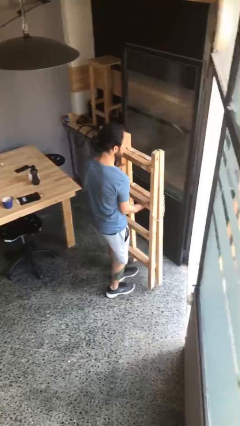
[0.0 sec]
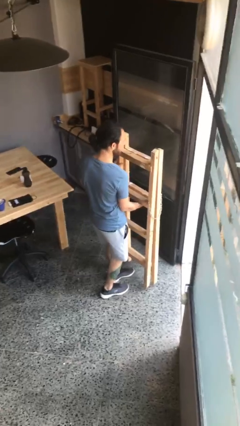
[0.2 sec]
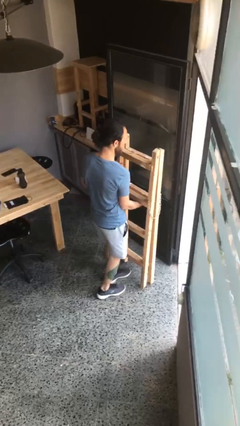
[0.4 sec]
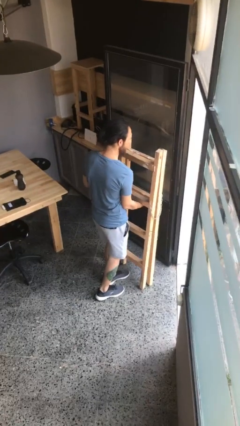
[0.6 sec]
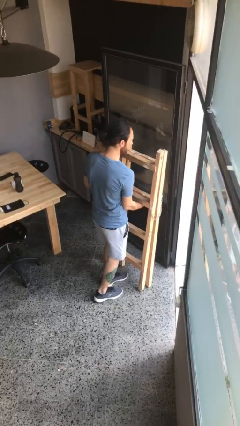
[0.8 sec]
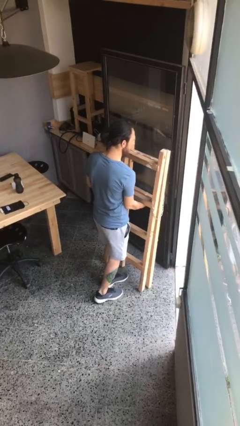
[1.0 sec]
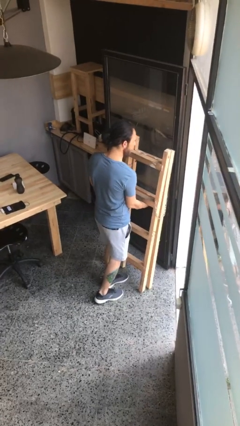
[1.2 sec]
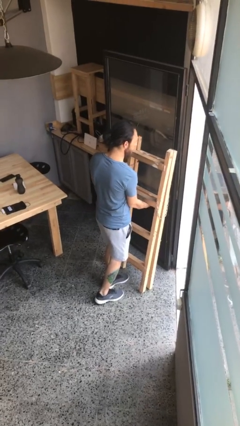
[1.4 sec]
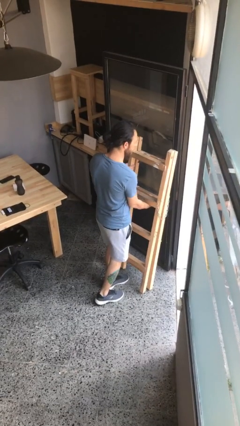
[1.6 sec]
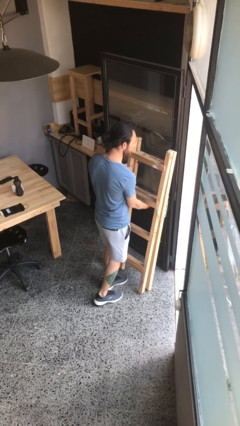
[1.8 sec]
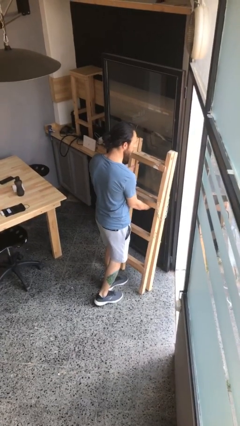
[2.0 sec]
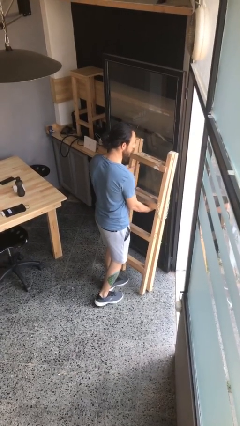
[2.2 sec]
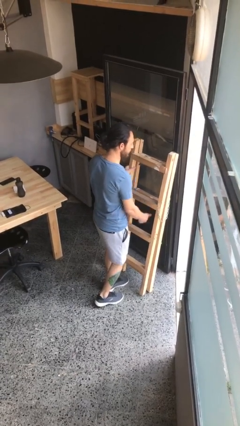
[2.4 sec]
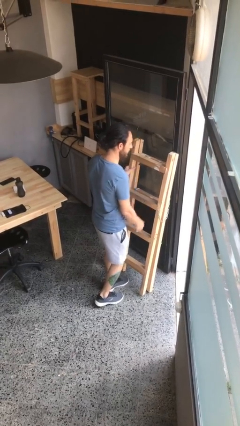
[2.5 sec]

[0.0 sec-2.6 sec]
person puts down object on floor

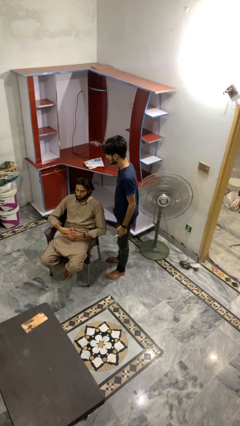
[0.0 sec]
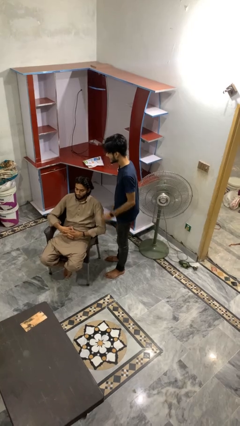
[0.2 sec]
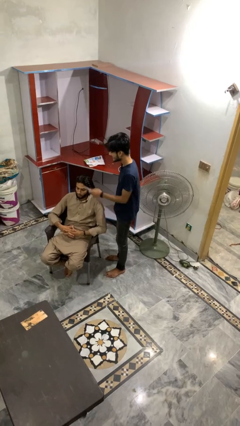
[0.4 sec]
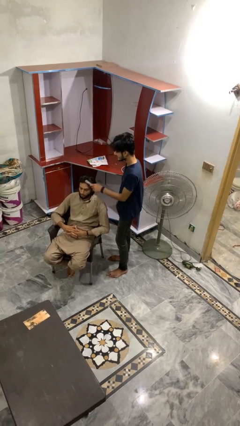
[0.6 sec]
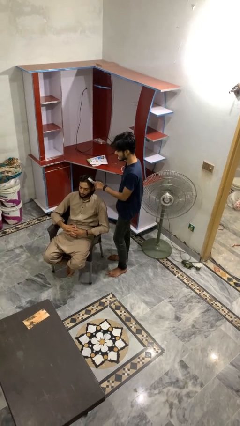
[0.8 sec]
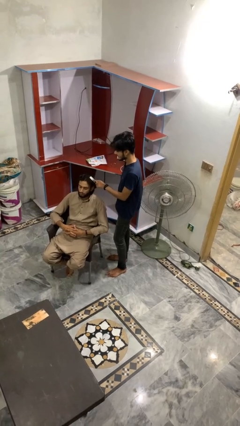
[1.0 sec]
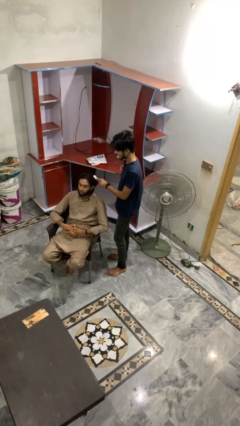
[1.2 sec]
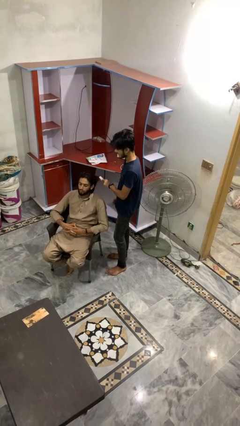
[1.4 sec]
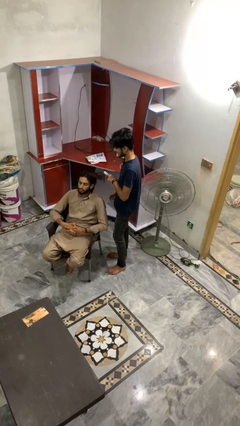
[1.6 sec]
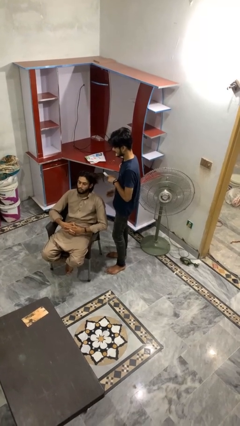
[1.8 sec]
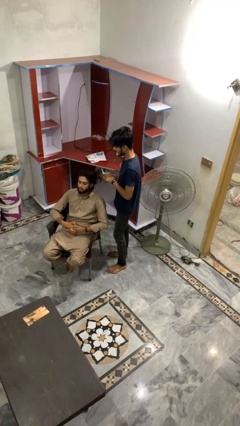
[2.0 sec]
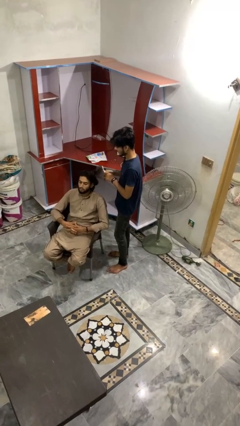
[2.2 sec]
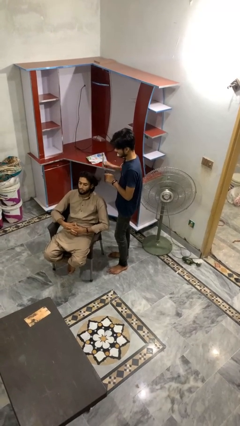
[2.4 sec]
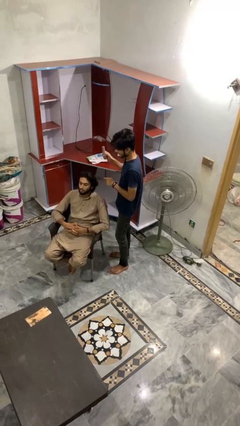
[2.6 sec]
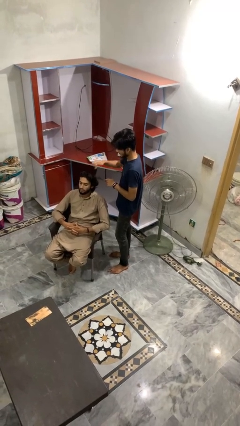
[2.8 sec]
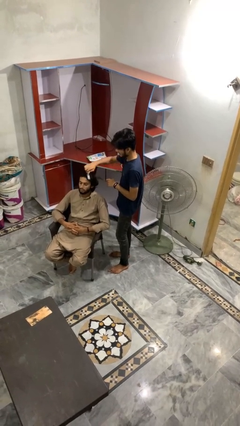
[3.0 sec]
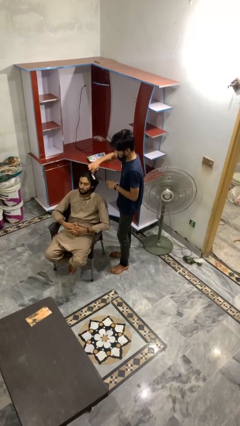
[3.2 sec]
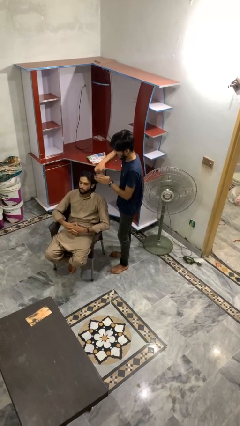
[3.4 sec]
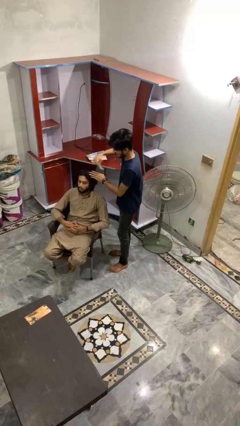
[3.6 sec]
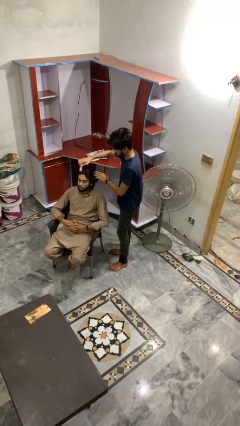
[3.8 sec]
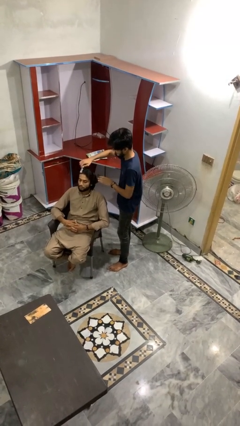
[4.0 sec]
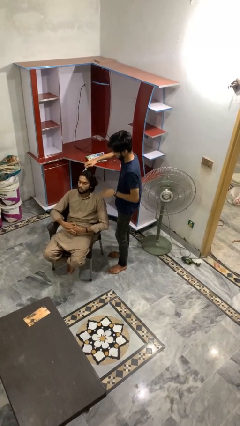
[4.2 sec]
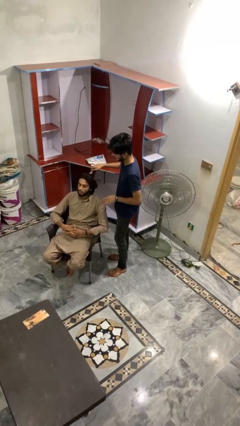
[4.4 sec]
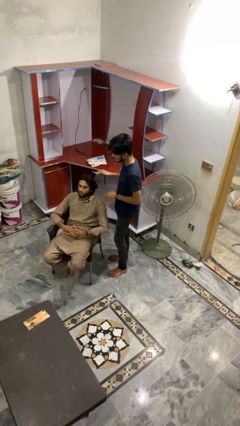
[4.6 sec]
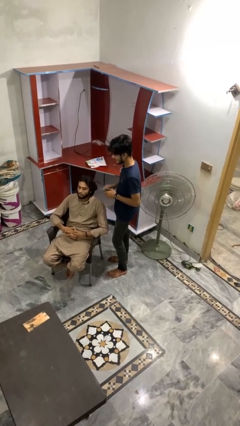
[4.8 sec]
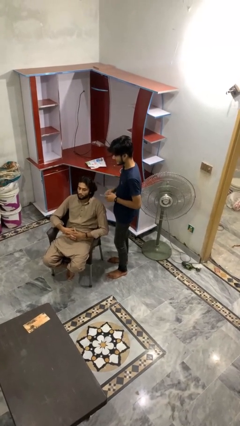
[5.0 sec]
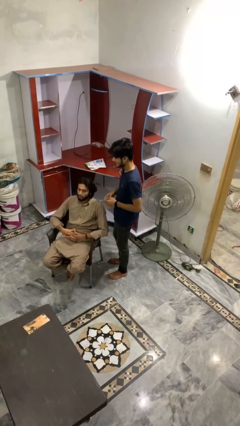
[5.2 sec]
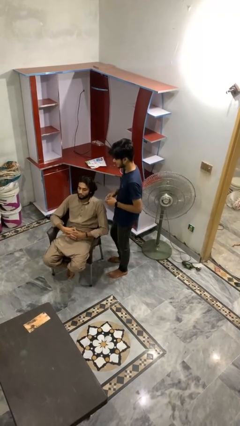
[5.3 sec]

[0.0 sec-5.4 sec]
person brushes hair of person

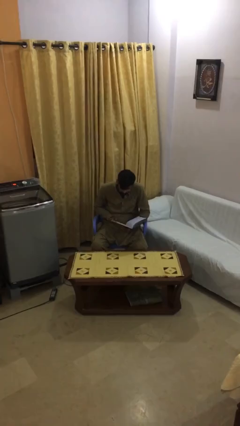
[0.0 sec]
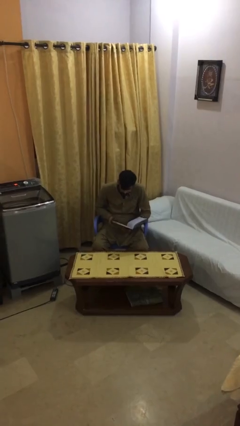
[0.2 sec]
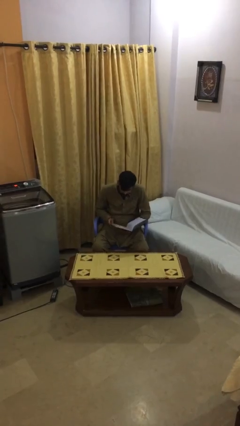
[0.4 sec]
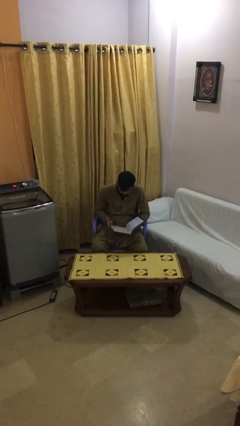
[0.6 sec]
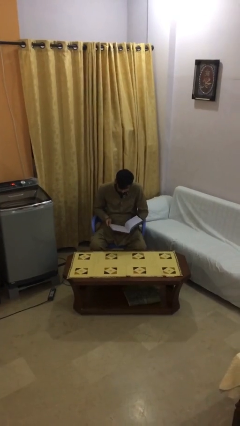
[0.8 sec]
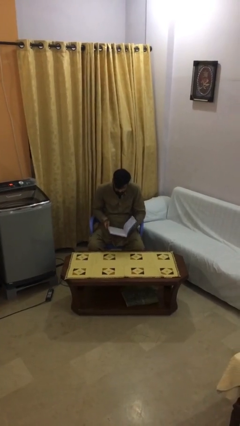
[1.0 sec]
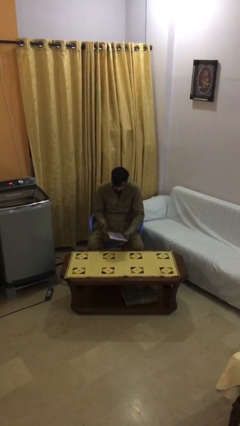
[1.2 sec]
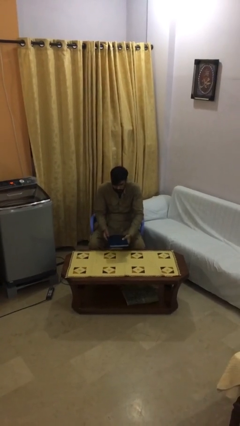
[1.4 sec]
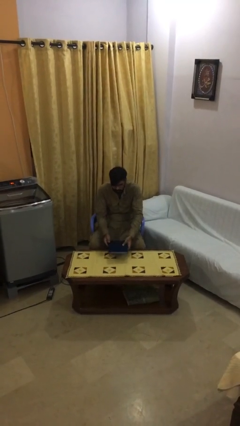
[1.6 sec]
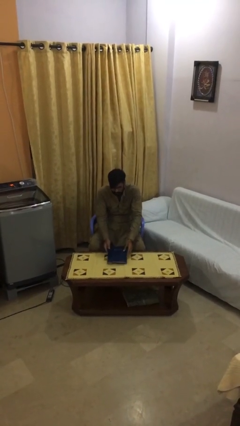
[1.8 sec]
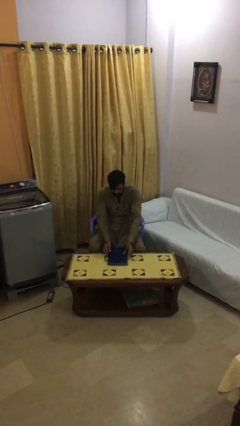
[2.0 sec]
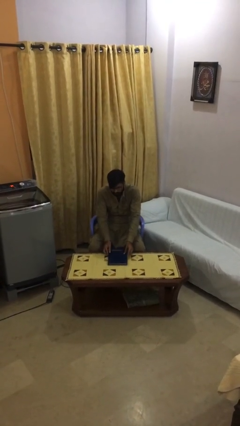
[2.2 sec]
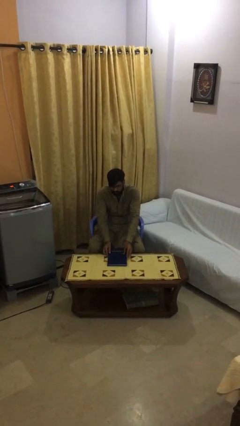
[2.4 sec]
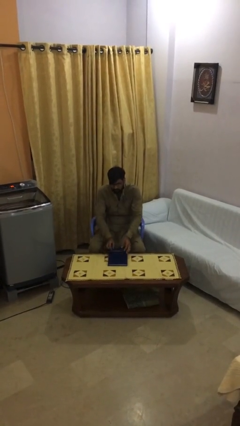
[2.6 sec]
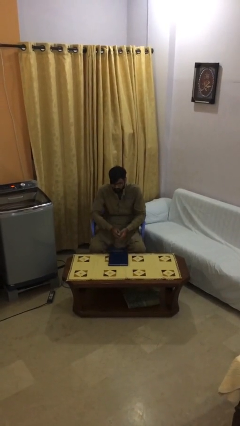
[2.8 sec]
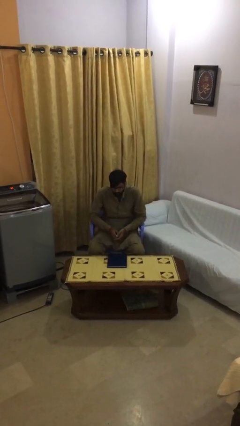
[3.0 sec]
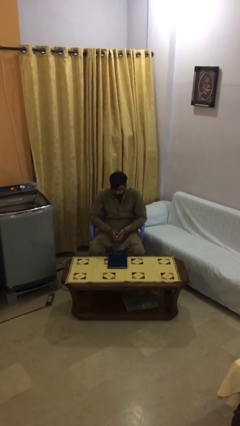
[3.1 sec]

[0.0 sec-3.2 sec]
person puts down object on table

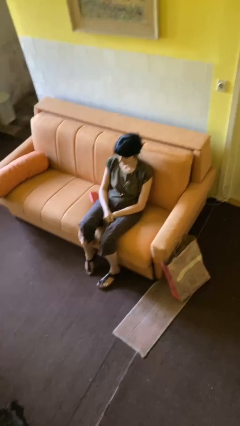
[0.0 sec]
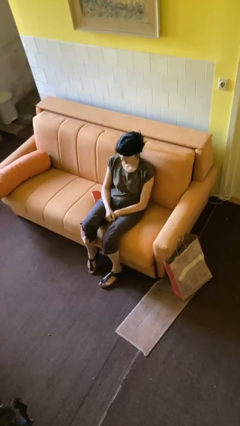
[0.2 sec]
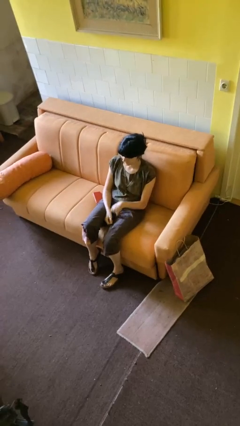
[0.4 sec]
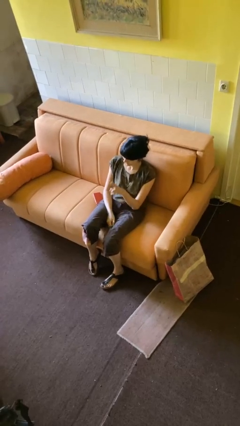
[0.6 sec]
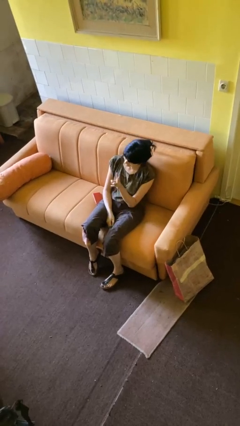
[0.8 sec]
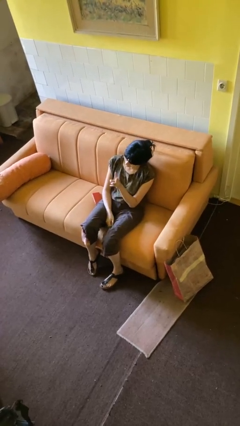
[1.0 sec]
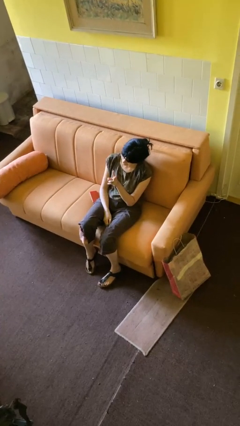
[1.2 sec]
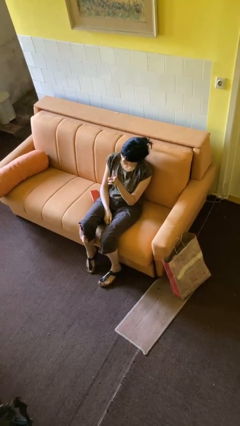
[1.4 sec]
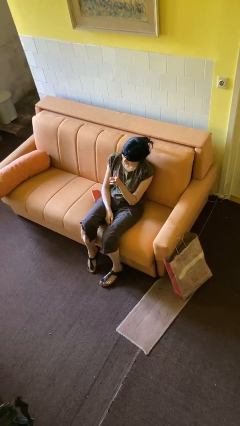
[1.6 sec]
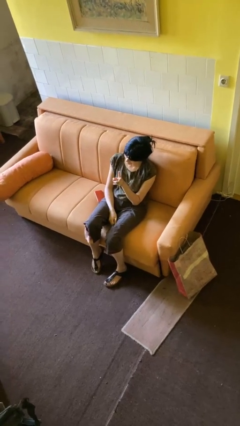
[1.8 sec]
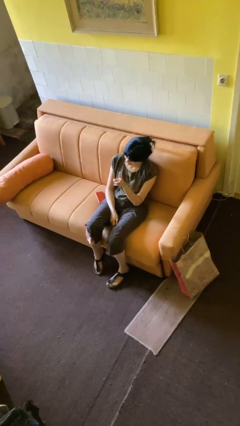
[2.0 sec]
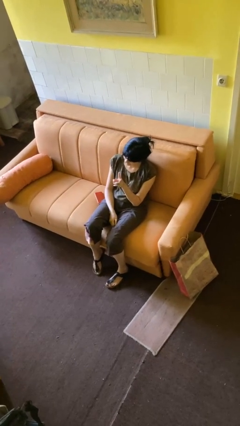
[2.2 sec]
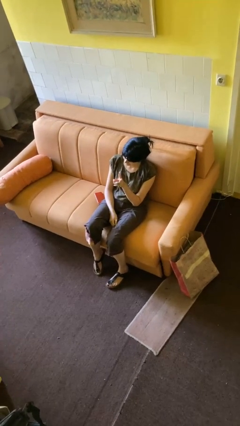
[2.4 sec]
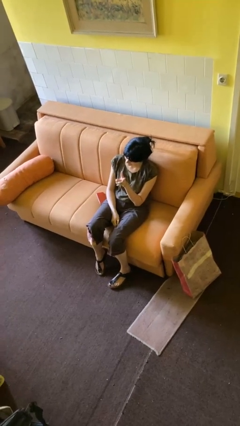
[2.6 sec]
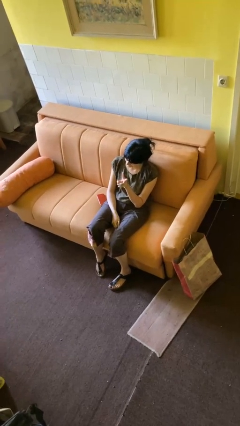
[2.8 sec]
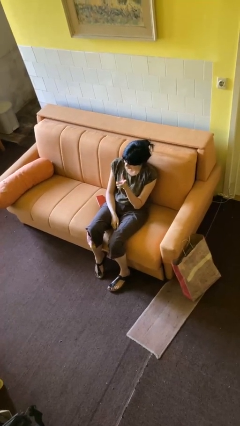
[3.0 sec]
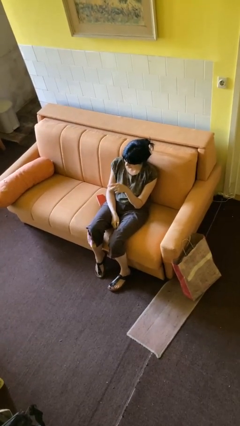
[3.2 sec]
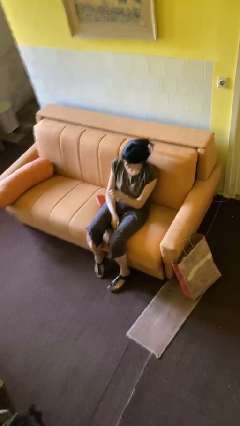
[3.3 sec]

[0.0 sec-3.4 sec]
person gestures peace

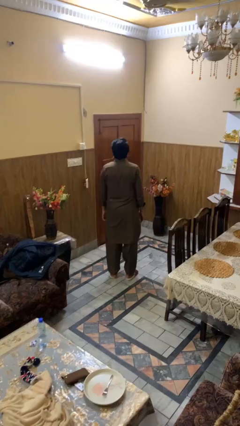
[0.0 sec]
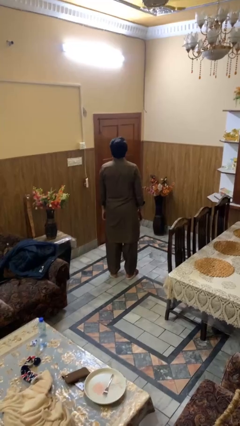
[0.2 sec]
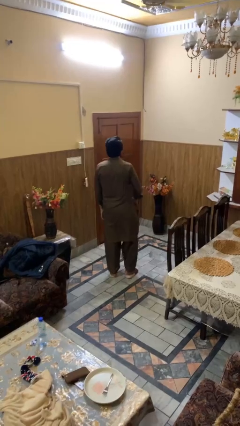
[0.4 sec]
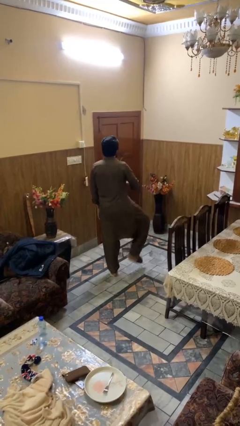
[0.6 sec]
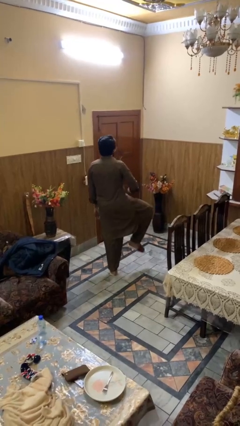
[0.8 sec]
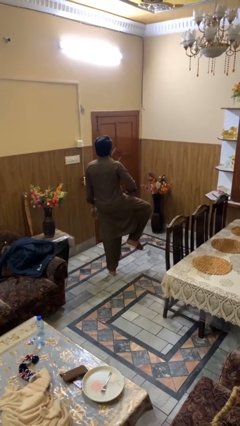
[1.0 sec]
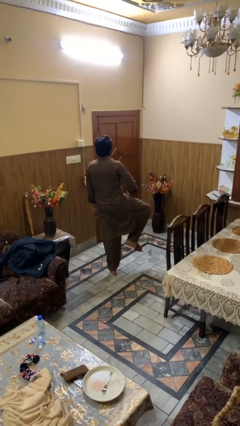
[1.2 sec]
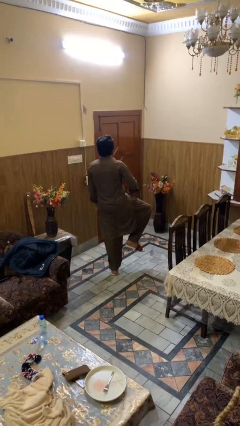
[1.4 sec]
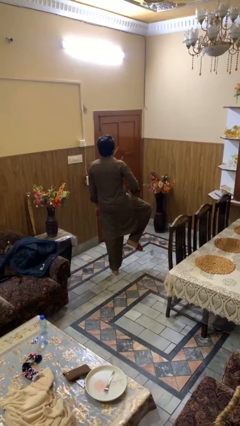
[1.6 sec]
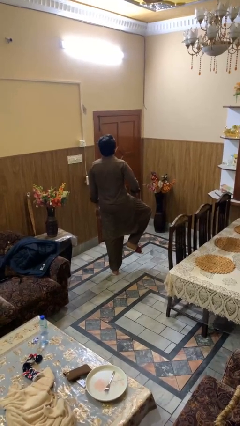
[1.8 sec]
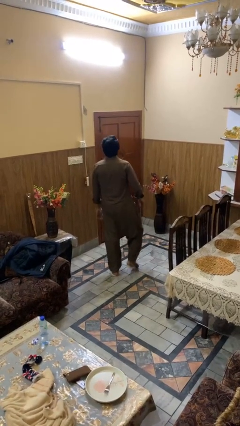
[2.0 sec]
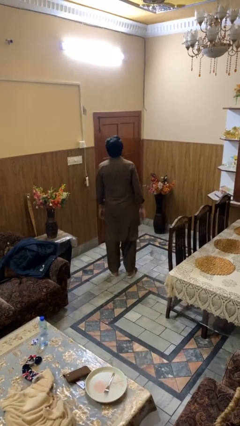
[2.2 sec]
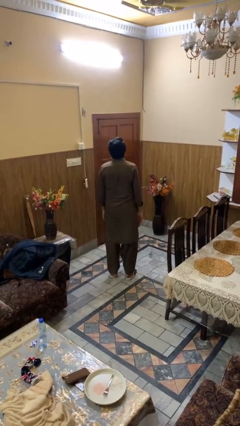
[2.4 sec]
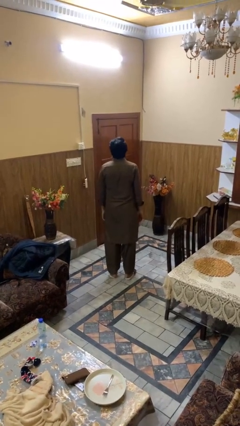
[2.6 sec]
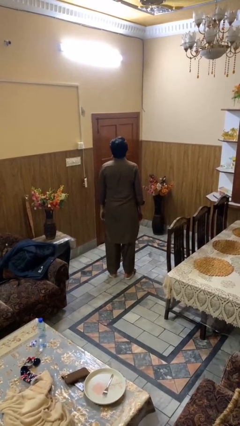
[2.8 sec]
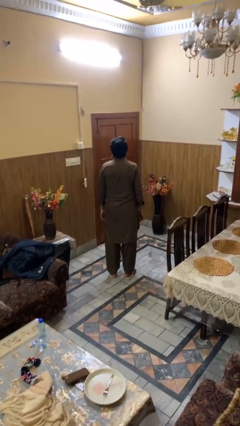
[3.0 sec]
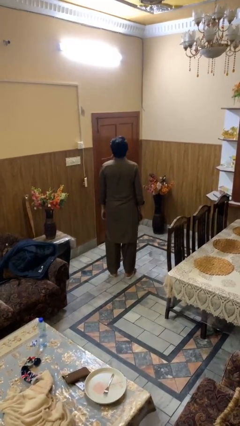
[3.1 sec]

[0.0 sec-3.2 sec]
person slaps hands on thighs
